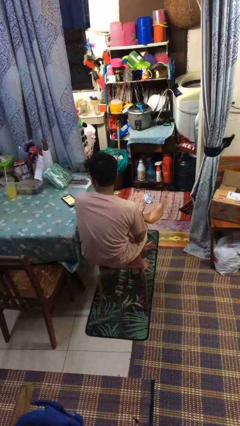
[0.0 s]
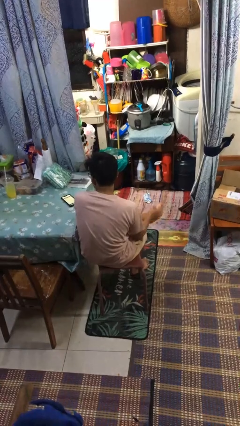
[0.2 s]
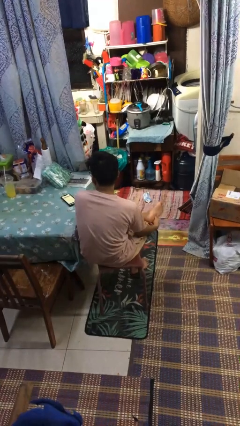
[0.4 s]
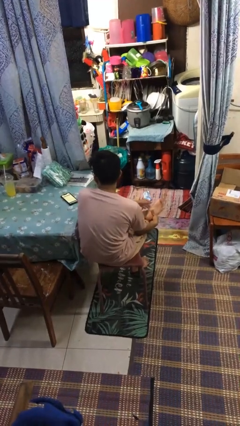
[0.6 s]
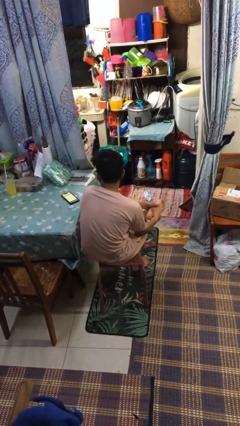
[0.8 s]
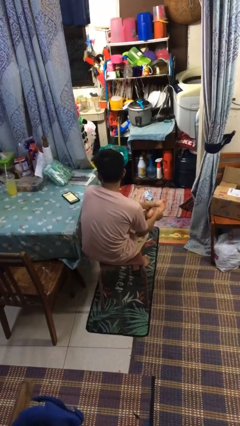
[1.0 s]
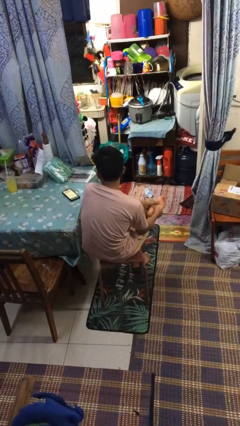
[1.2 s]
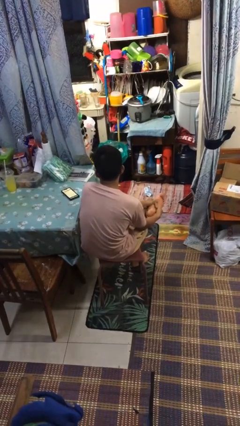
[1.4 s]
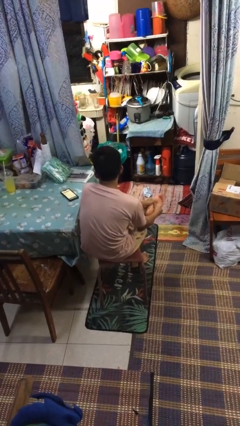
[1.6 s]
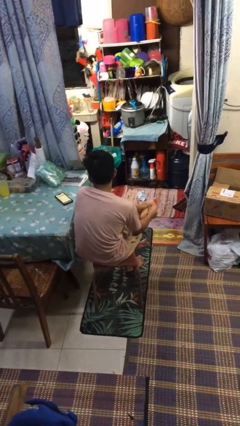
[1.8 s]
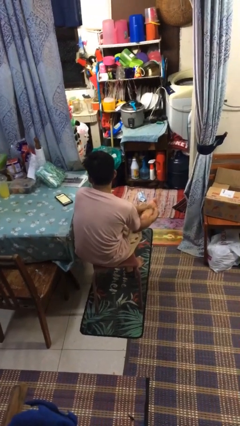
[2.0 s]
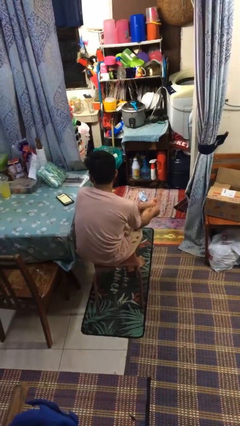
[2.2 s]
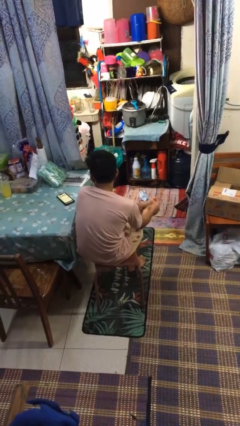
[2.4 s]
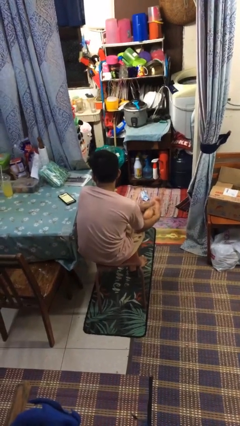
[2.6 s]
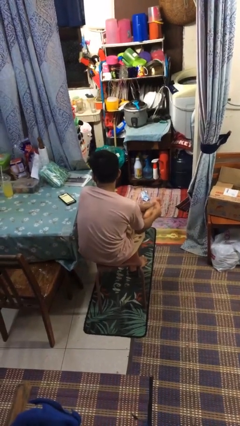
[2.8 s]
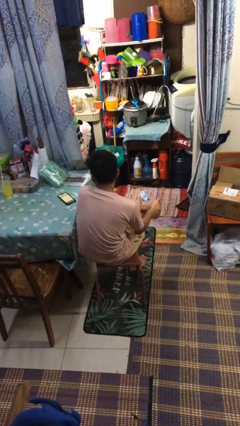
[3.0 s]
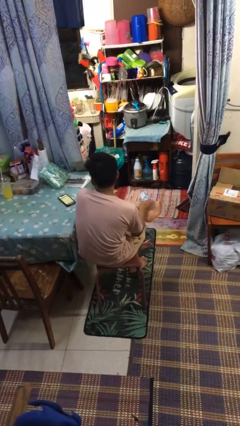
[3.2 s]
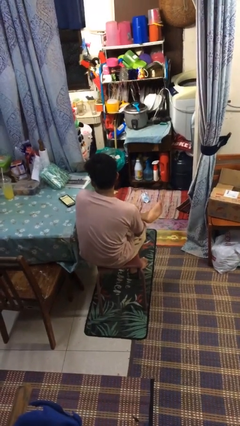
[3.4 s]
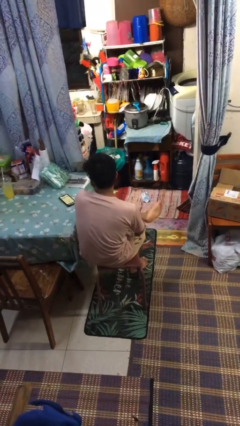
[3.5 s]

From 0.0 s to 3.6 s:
person rubs foot

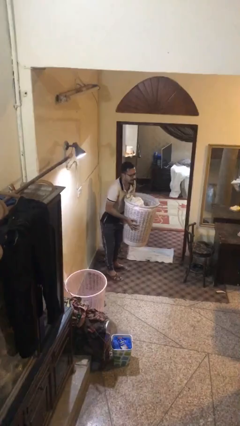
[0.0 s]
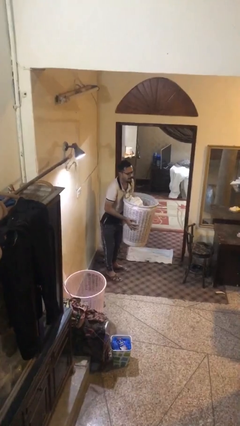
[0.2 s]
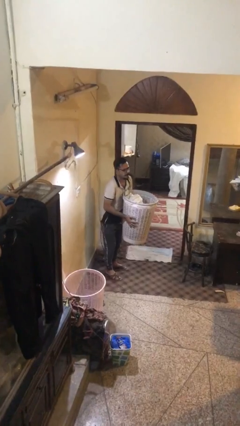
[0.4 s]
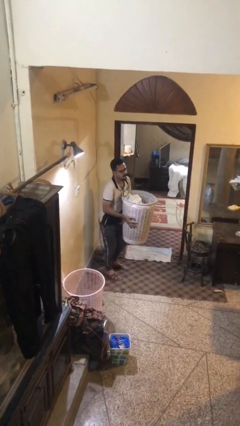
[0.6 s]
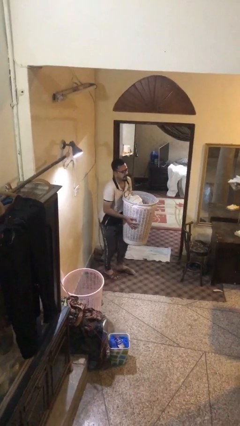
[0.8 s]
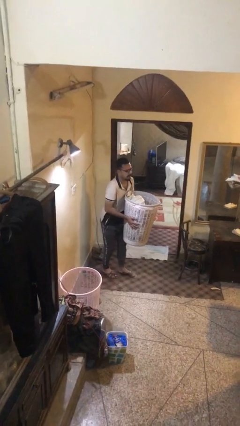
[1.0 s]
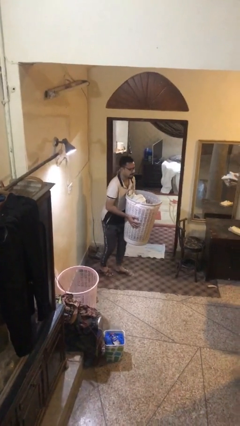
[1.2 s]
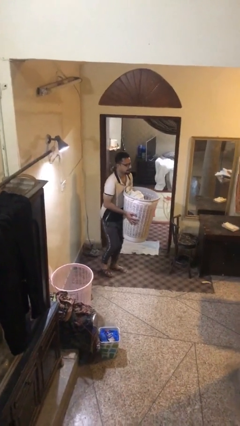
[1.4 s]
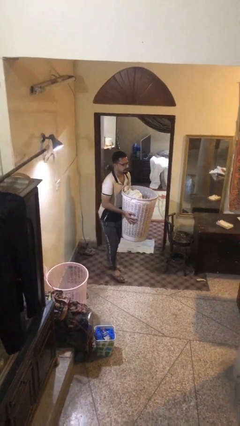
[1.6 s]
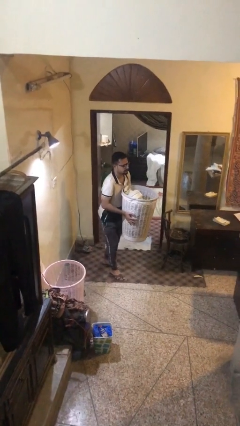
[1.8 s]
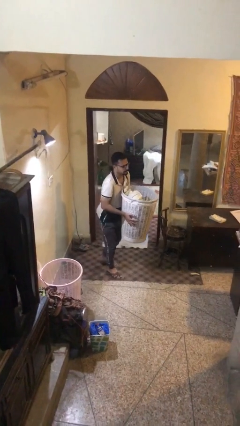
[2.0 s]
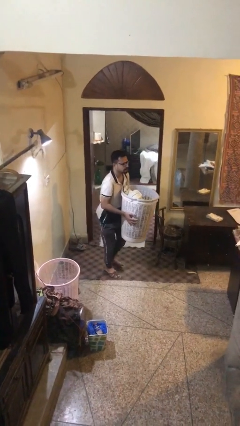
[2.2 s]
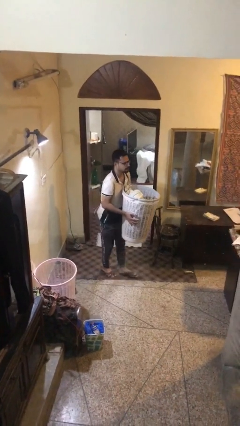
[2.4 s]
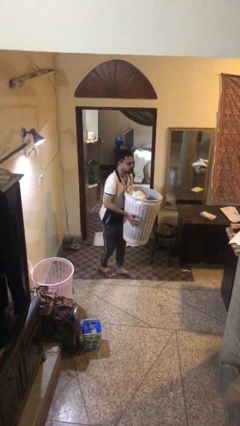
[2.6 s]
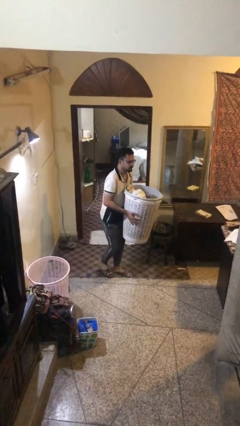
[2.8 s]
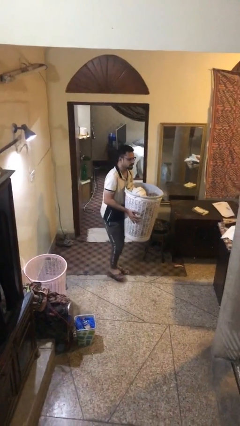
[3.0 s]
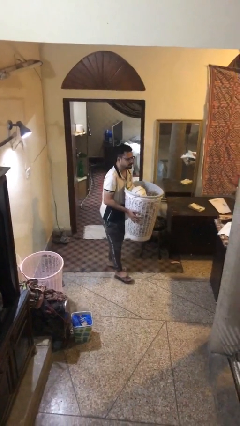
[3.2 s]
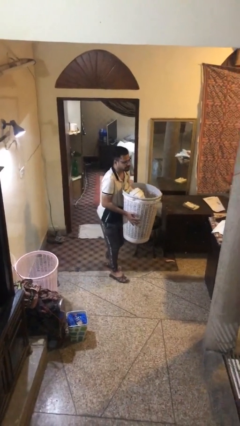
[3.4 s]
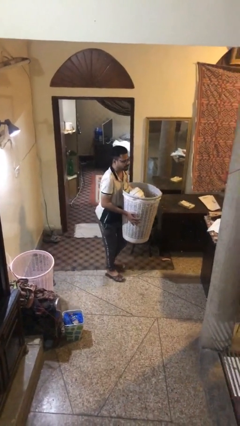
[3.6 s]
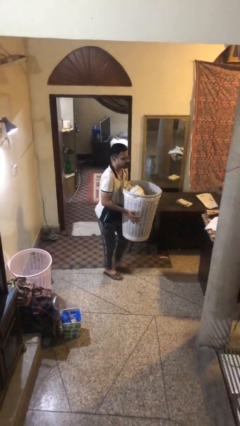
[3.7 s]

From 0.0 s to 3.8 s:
person carries heavy object

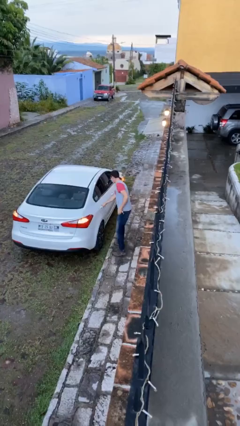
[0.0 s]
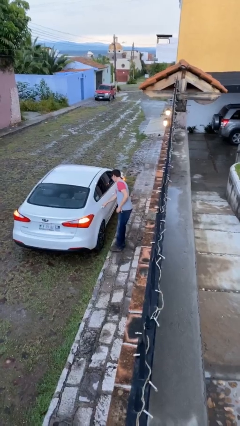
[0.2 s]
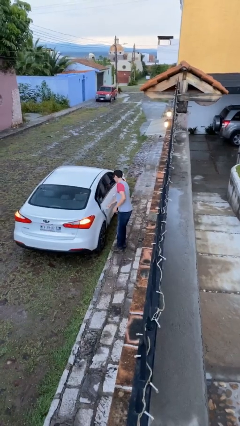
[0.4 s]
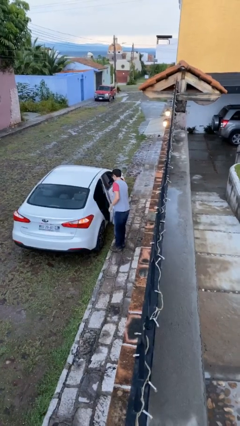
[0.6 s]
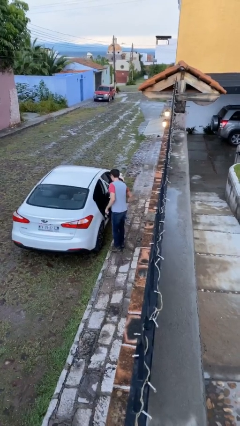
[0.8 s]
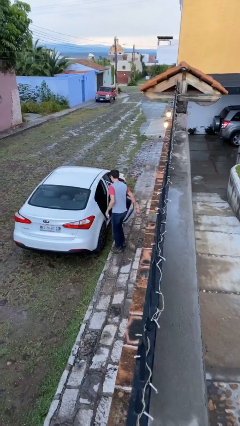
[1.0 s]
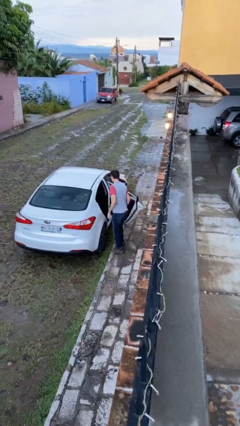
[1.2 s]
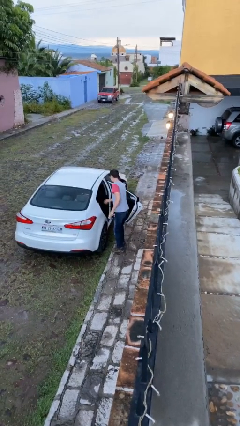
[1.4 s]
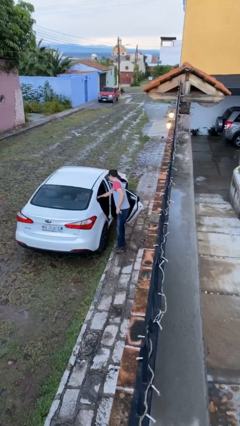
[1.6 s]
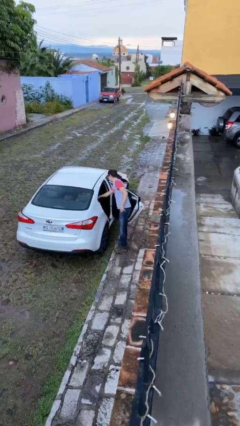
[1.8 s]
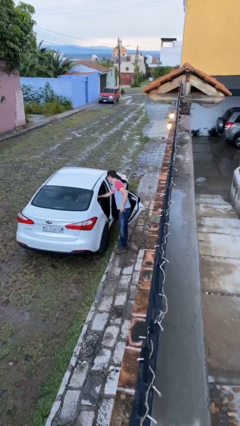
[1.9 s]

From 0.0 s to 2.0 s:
person opens car door

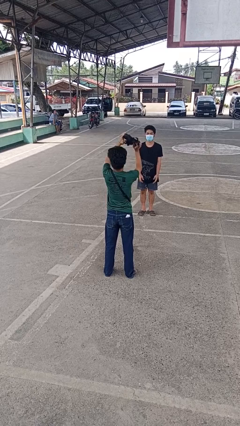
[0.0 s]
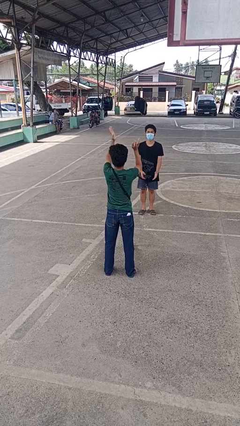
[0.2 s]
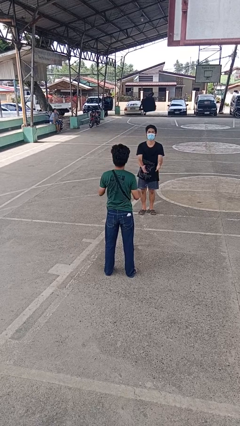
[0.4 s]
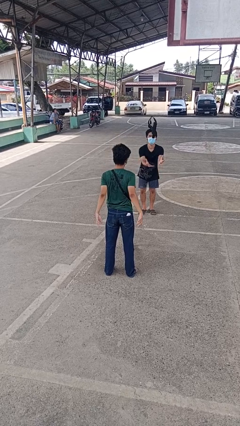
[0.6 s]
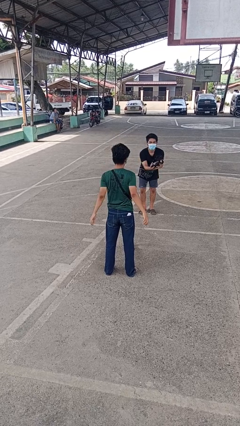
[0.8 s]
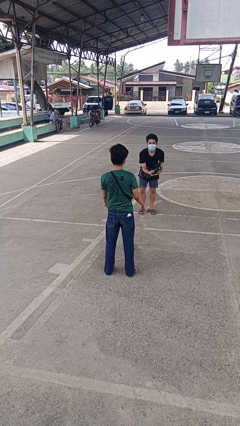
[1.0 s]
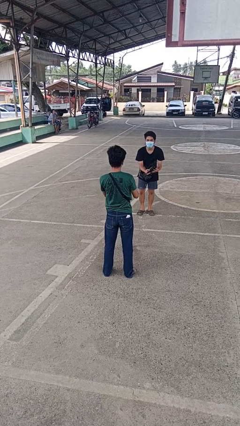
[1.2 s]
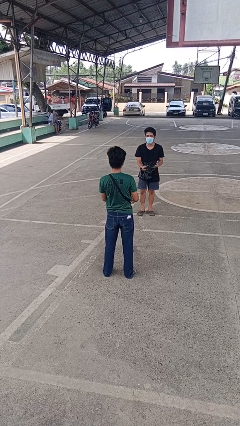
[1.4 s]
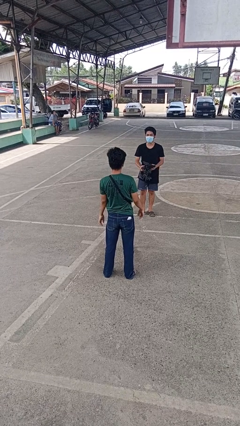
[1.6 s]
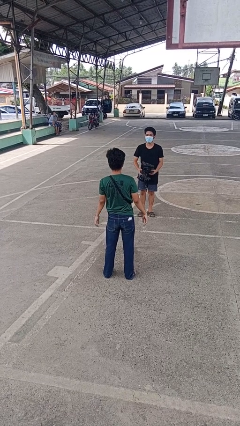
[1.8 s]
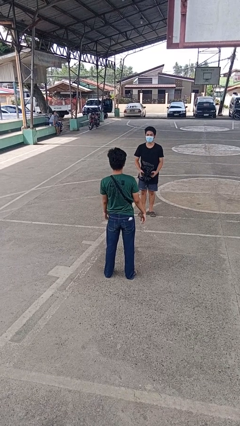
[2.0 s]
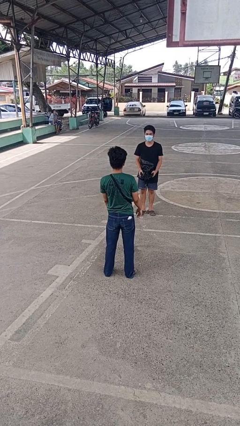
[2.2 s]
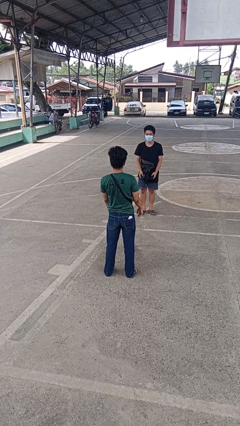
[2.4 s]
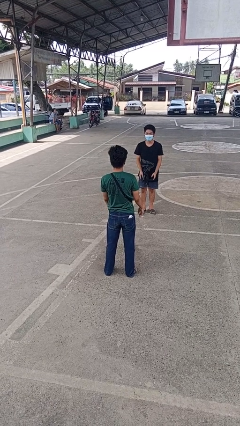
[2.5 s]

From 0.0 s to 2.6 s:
person throws object to person

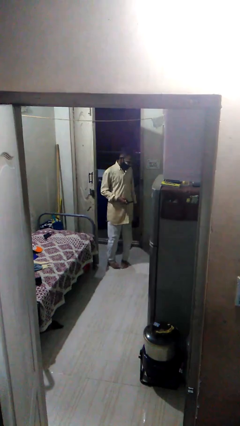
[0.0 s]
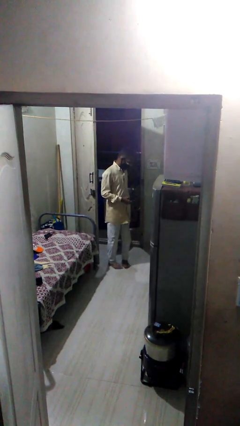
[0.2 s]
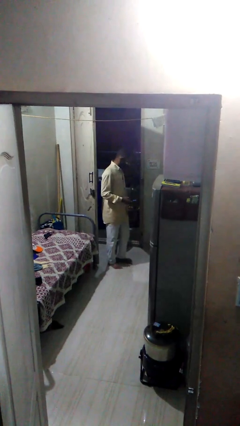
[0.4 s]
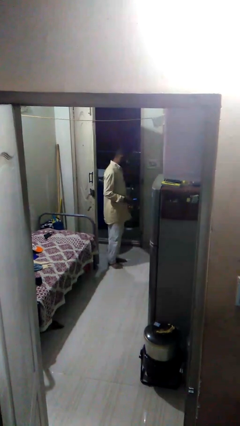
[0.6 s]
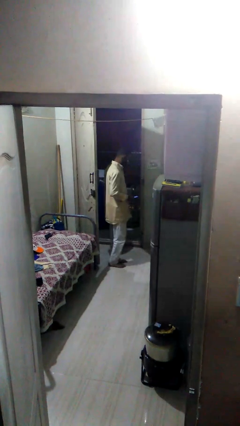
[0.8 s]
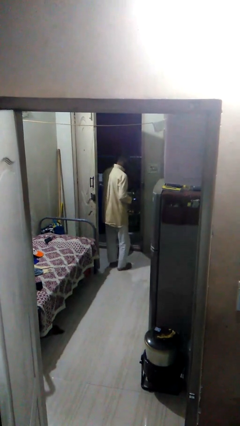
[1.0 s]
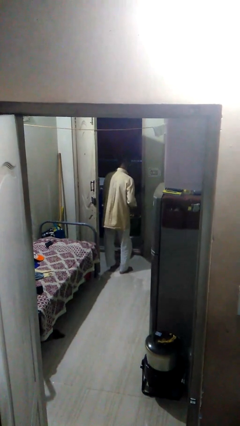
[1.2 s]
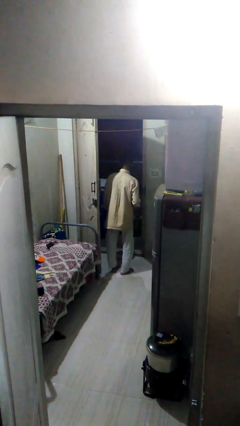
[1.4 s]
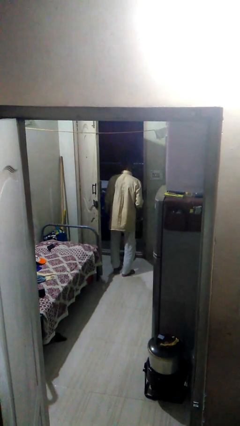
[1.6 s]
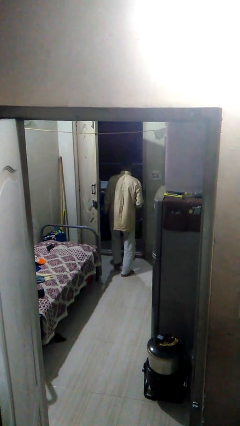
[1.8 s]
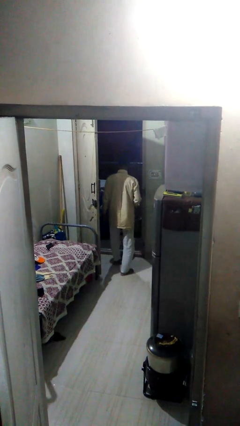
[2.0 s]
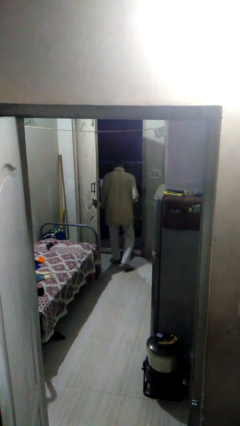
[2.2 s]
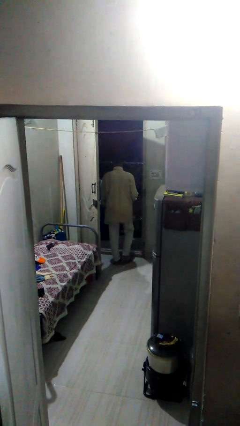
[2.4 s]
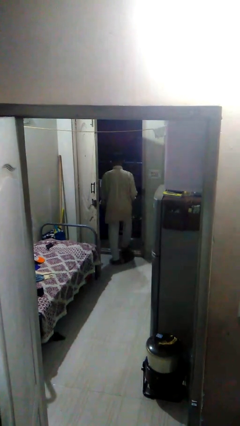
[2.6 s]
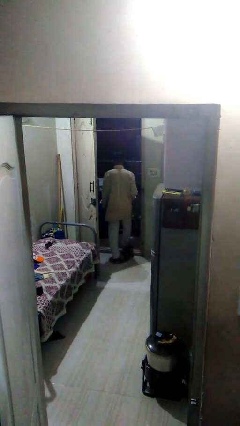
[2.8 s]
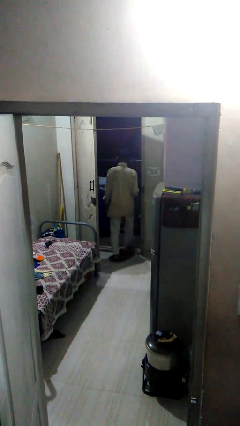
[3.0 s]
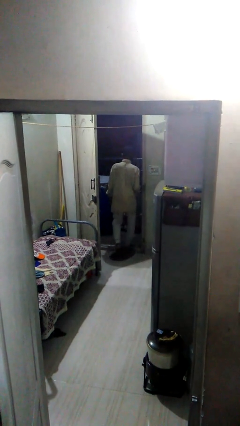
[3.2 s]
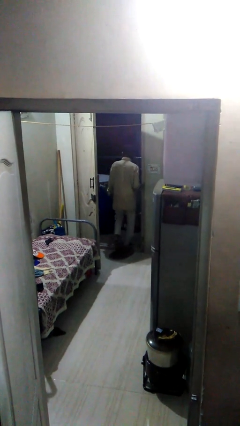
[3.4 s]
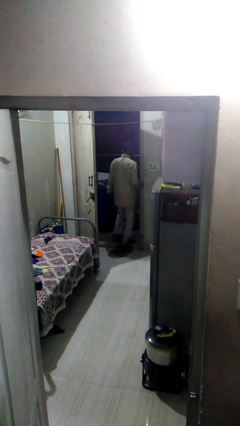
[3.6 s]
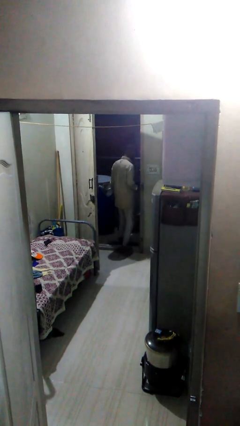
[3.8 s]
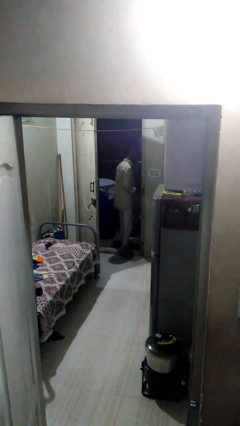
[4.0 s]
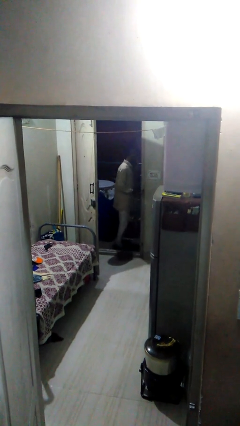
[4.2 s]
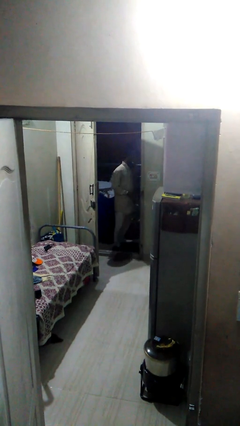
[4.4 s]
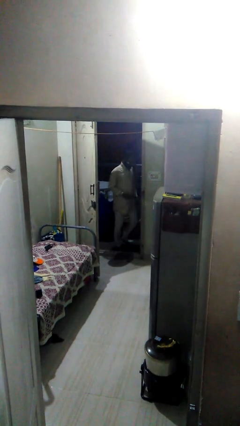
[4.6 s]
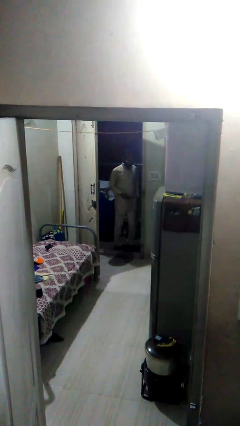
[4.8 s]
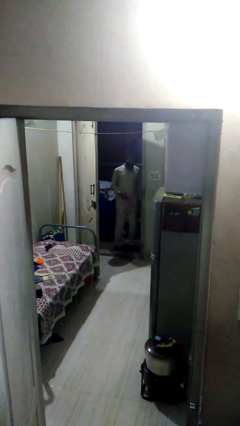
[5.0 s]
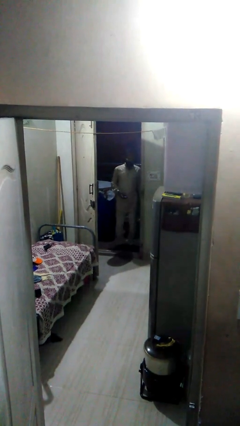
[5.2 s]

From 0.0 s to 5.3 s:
person exits scene through structure

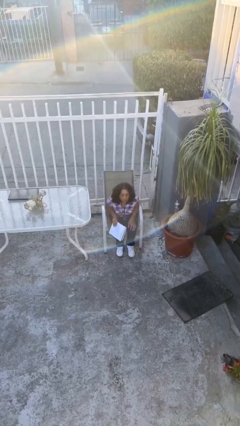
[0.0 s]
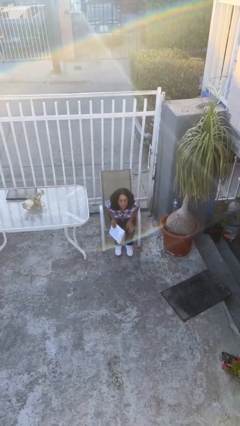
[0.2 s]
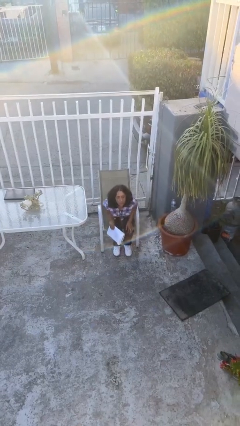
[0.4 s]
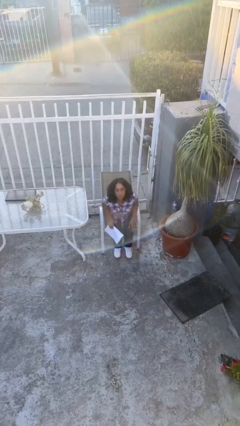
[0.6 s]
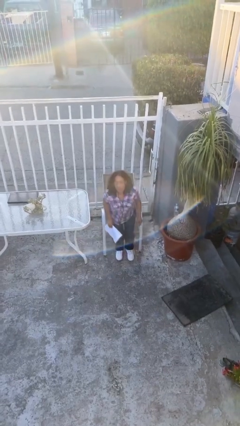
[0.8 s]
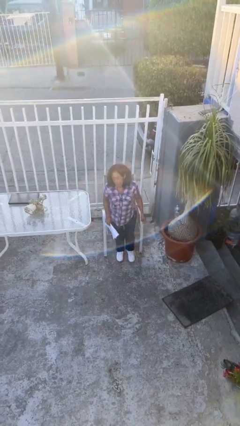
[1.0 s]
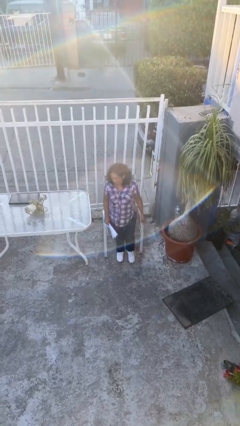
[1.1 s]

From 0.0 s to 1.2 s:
person stands up
